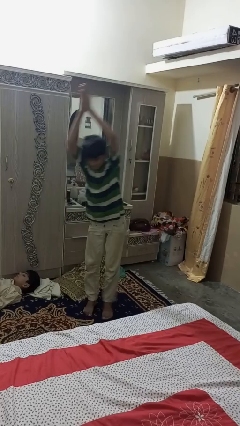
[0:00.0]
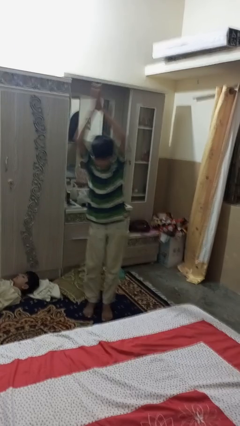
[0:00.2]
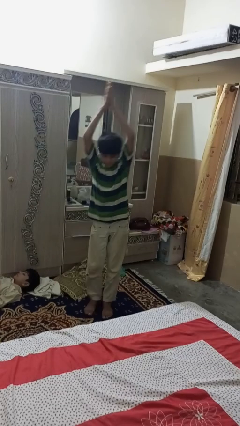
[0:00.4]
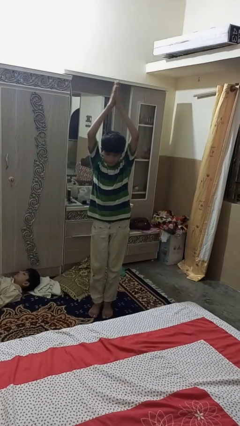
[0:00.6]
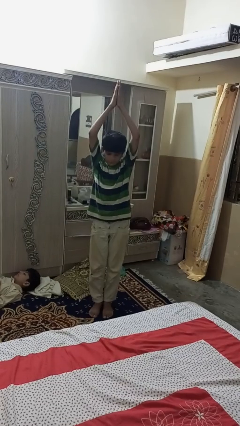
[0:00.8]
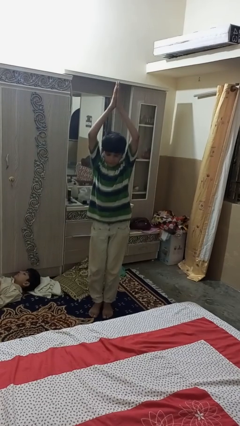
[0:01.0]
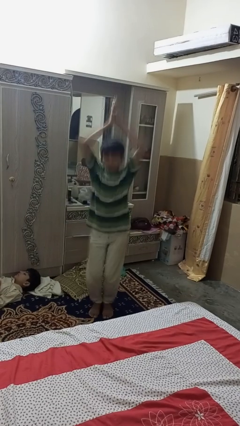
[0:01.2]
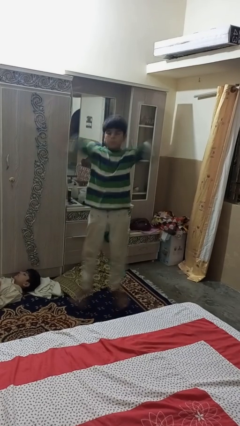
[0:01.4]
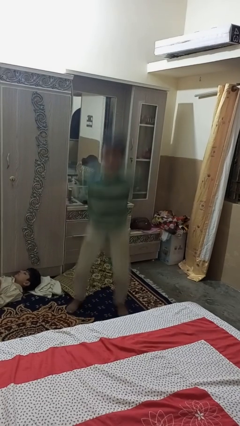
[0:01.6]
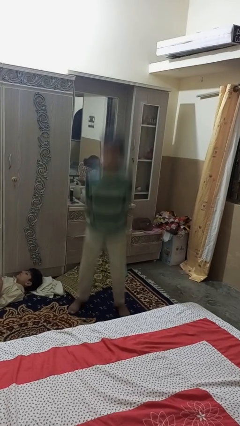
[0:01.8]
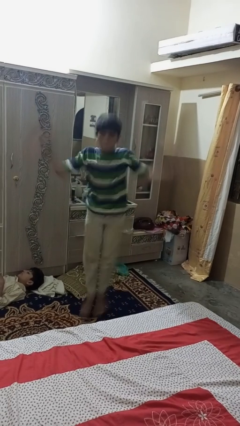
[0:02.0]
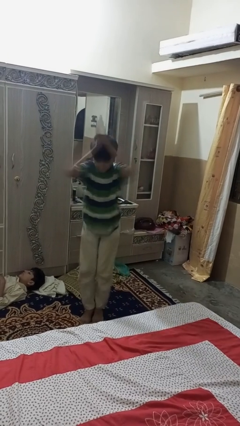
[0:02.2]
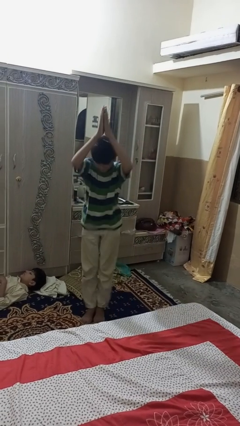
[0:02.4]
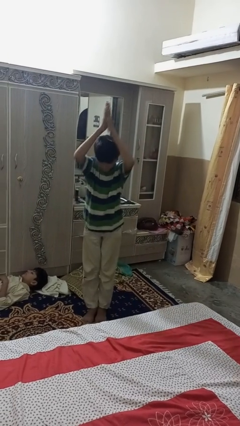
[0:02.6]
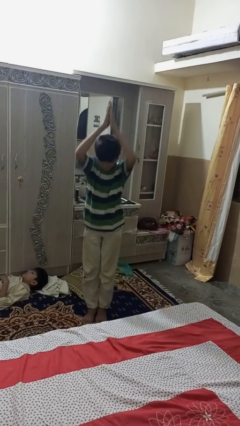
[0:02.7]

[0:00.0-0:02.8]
person exercises with jumping jacks

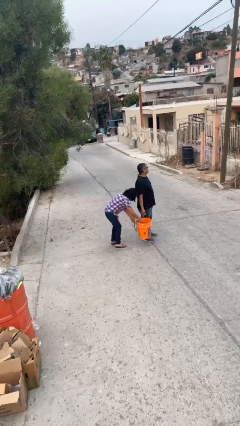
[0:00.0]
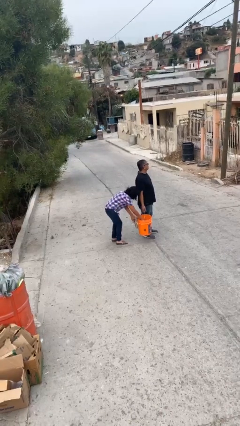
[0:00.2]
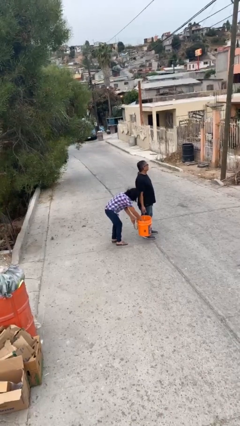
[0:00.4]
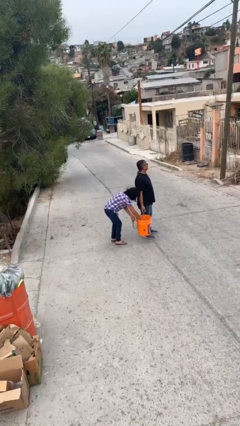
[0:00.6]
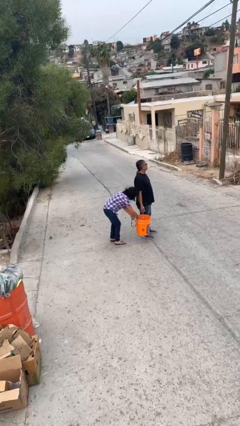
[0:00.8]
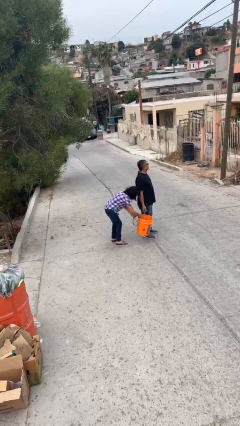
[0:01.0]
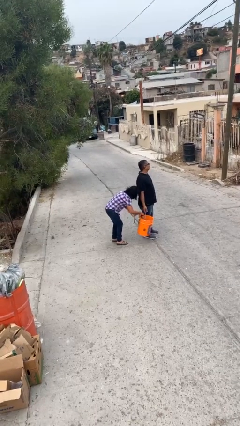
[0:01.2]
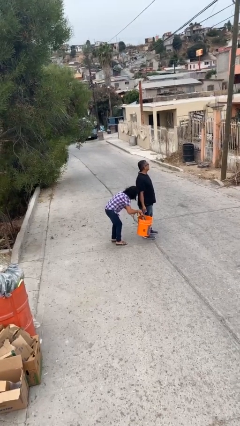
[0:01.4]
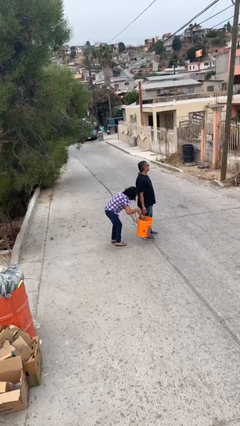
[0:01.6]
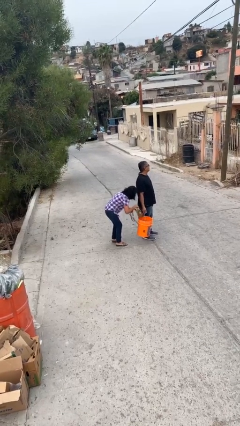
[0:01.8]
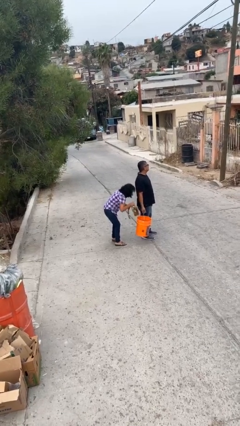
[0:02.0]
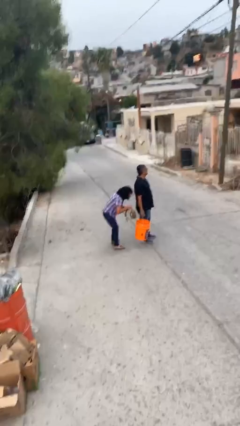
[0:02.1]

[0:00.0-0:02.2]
person steals object from person

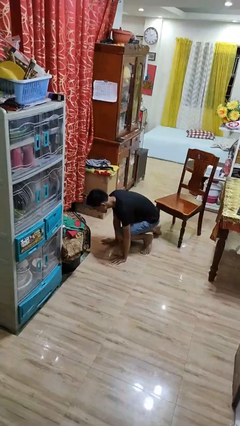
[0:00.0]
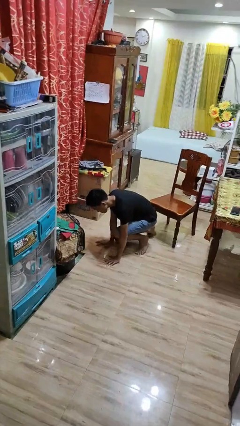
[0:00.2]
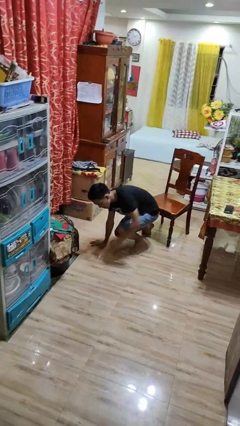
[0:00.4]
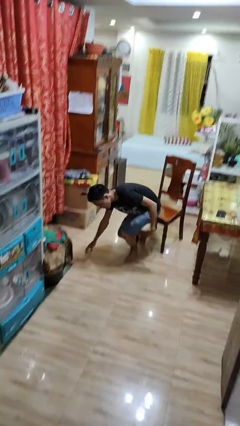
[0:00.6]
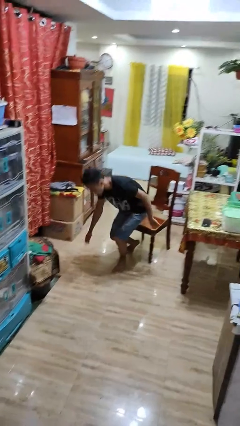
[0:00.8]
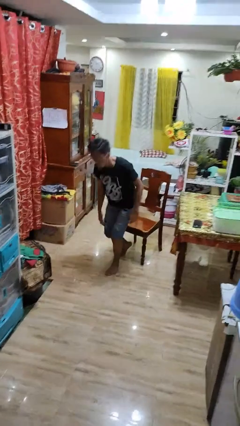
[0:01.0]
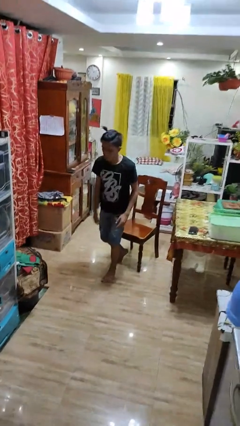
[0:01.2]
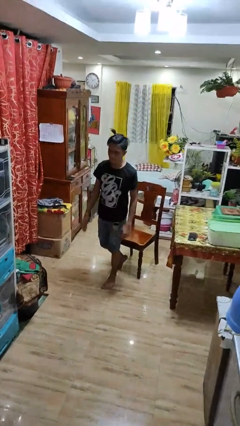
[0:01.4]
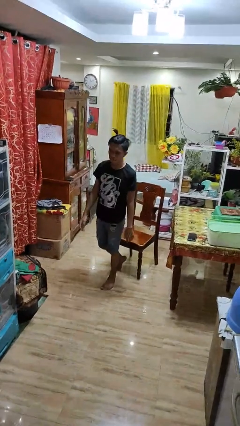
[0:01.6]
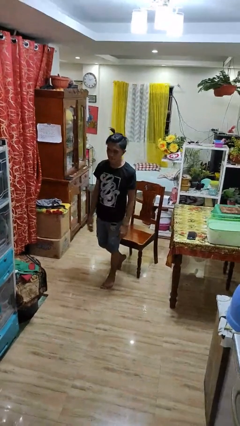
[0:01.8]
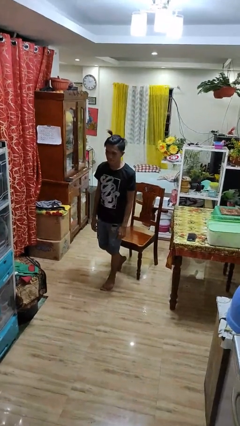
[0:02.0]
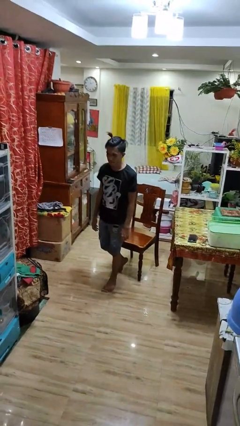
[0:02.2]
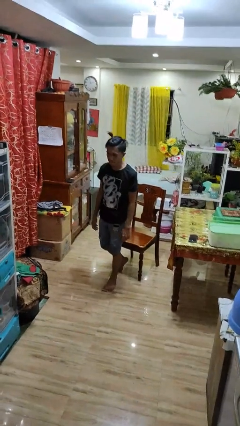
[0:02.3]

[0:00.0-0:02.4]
person stands up from floor

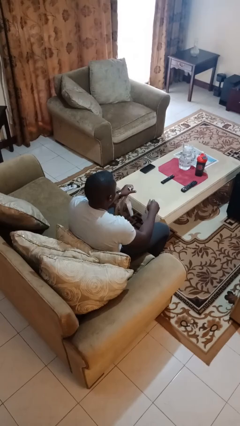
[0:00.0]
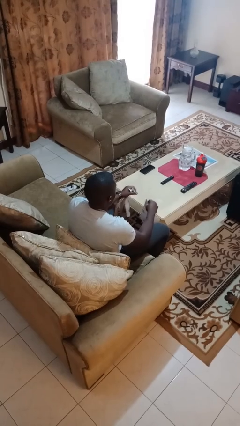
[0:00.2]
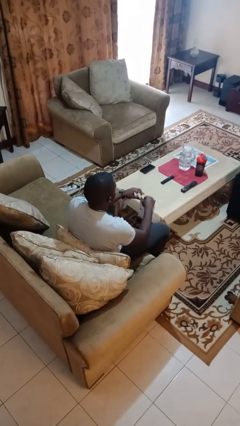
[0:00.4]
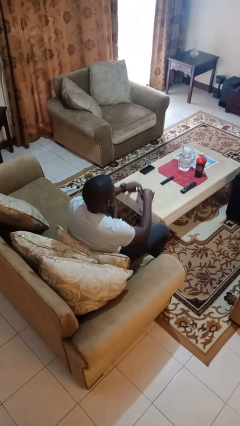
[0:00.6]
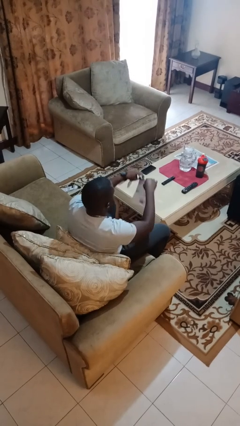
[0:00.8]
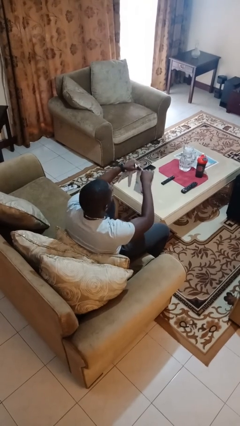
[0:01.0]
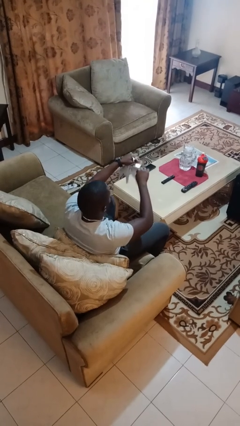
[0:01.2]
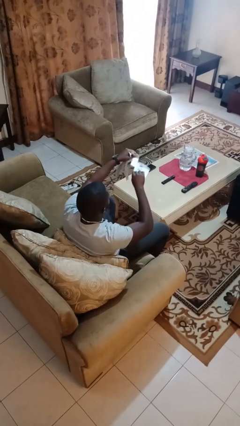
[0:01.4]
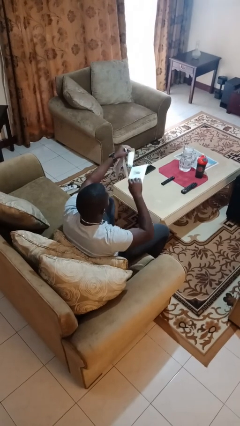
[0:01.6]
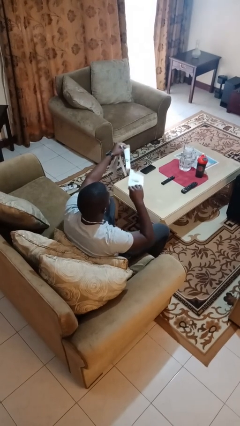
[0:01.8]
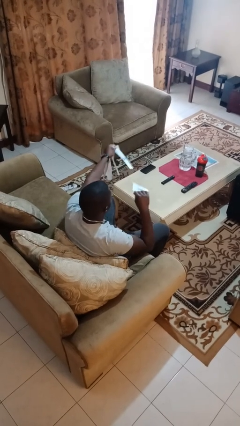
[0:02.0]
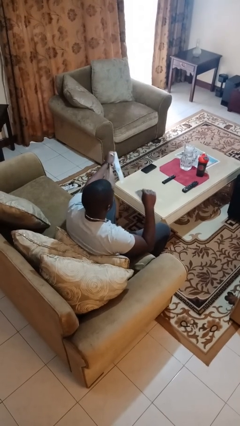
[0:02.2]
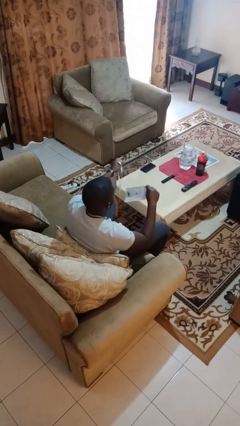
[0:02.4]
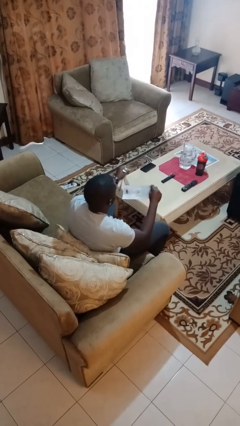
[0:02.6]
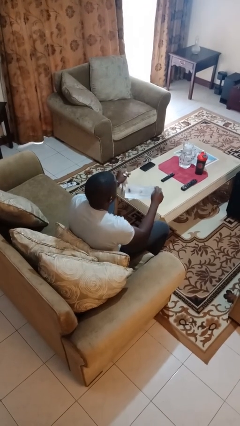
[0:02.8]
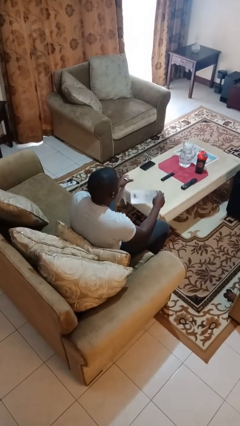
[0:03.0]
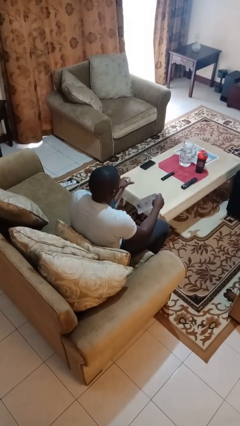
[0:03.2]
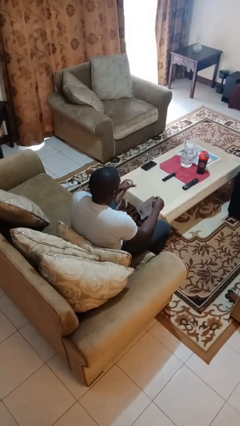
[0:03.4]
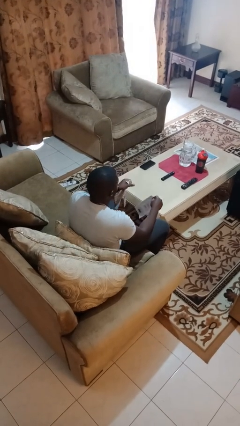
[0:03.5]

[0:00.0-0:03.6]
person tears paper

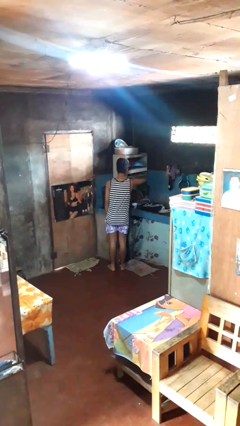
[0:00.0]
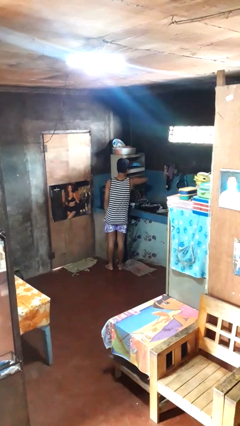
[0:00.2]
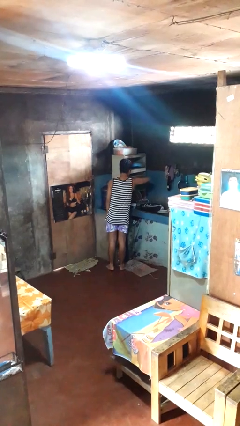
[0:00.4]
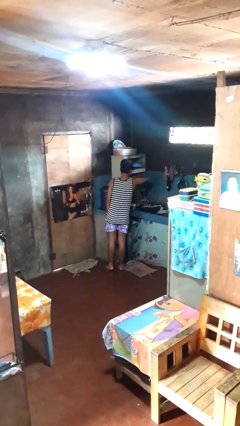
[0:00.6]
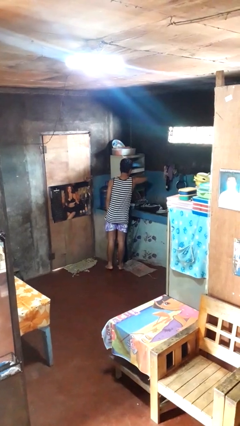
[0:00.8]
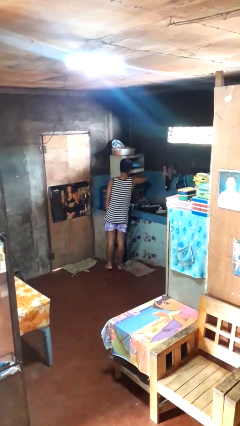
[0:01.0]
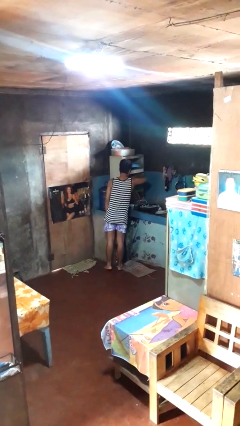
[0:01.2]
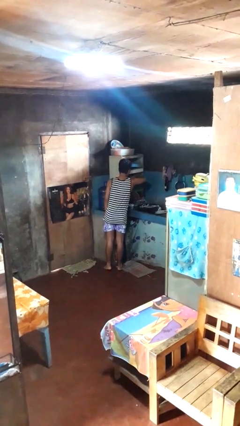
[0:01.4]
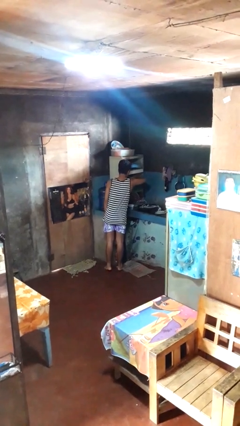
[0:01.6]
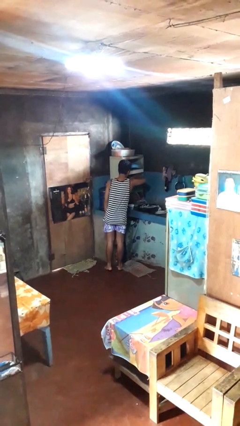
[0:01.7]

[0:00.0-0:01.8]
person searches in kitchen drawer

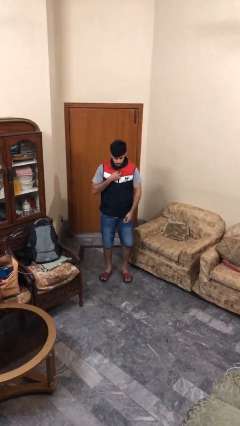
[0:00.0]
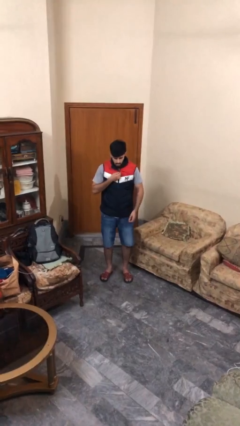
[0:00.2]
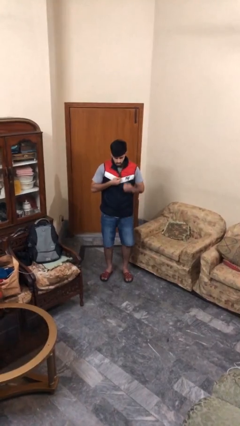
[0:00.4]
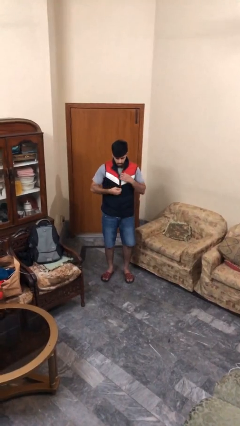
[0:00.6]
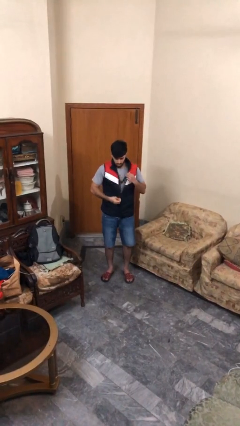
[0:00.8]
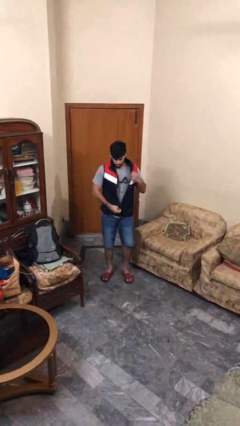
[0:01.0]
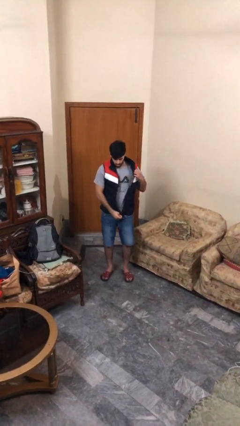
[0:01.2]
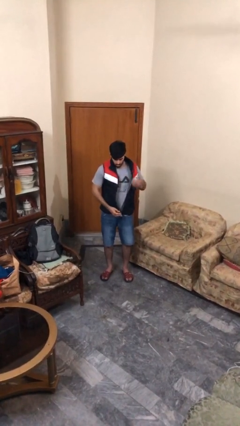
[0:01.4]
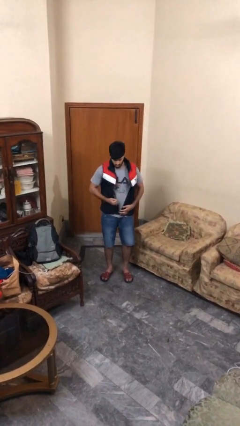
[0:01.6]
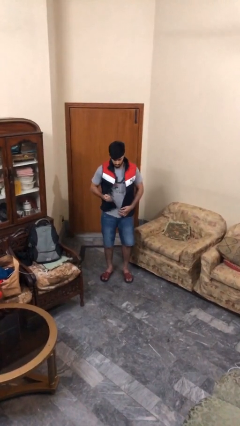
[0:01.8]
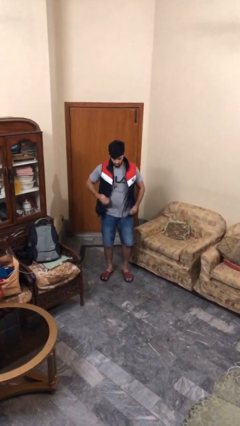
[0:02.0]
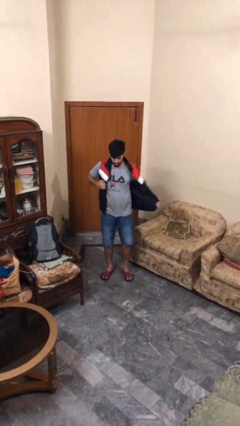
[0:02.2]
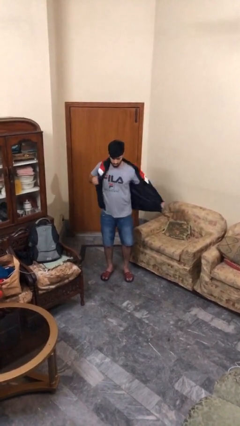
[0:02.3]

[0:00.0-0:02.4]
person unzips jacket

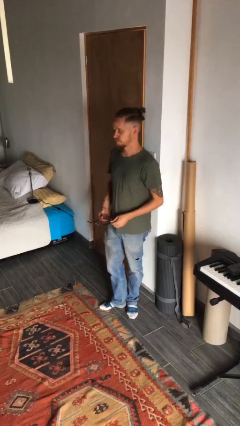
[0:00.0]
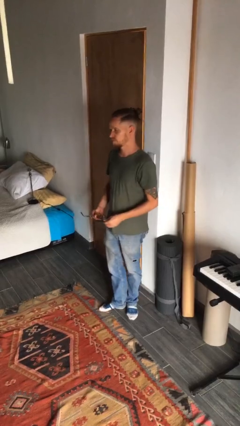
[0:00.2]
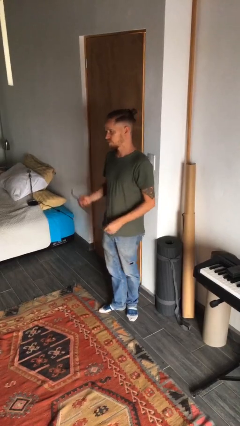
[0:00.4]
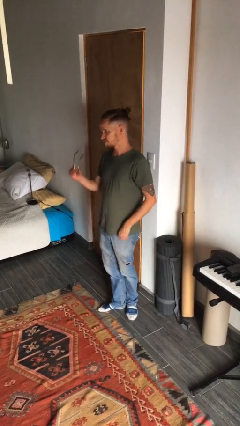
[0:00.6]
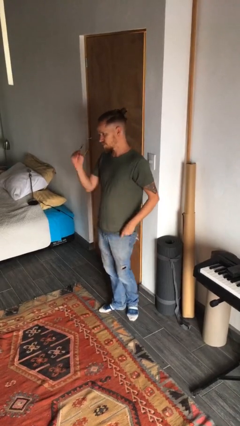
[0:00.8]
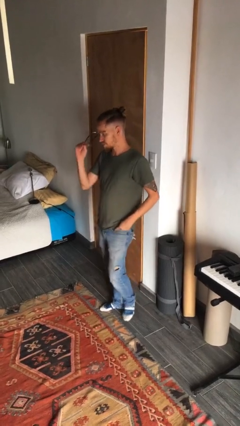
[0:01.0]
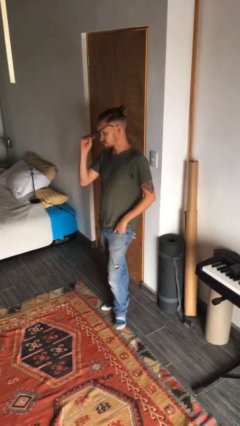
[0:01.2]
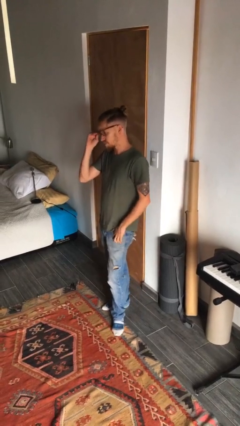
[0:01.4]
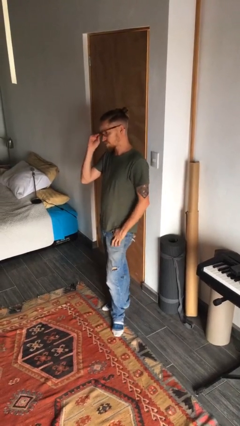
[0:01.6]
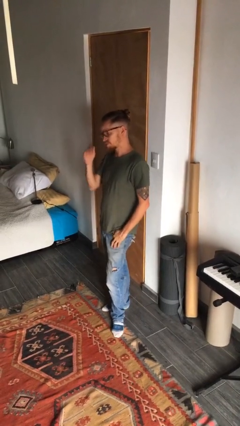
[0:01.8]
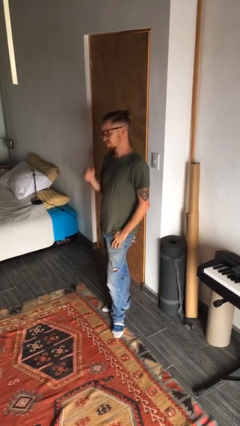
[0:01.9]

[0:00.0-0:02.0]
person puts on glasses

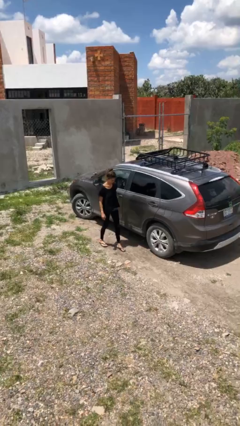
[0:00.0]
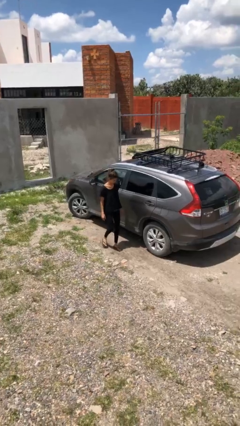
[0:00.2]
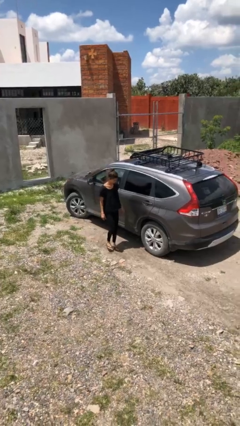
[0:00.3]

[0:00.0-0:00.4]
person kicks car tires
